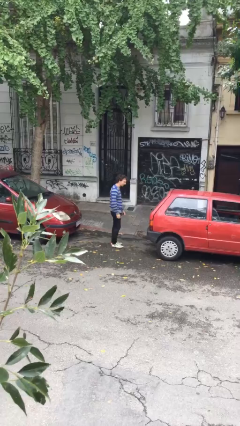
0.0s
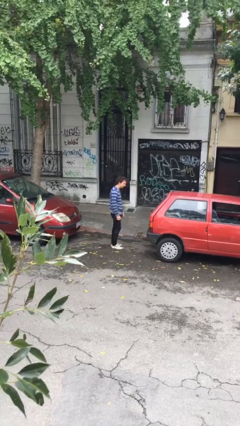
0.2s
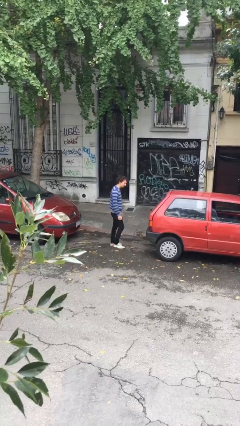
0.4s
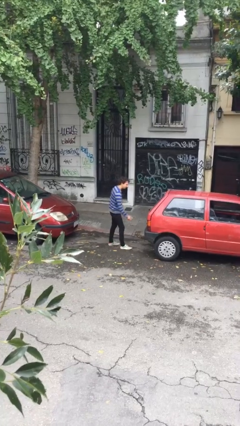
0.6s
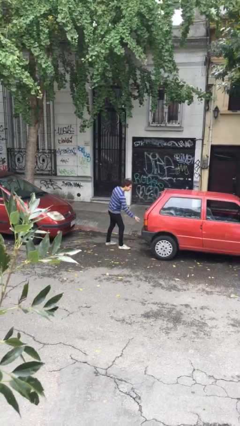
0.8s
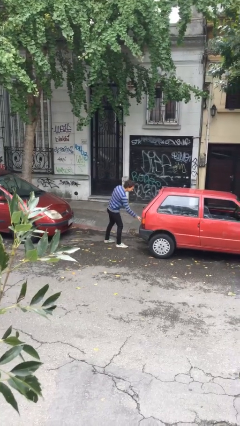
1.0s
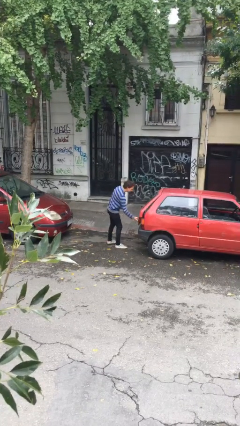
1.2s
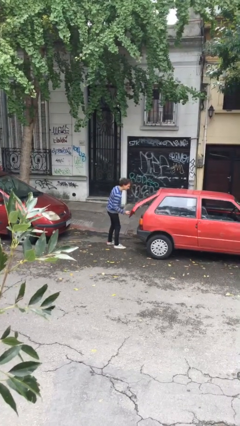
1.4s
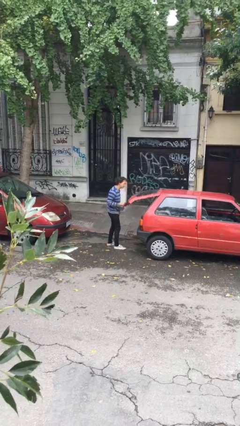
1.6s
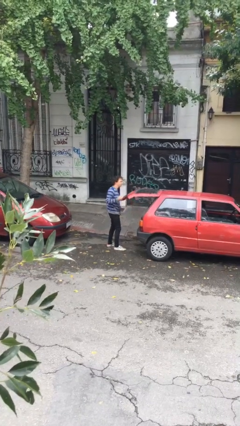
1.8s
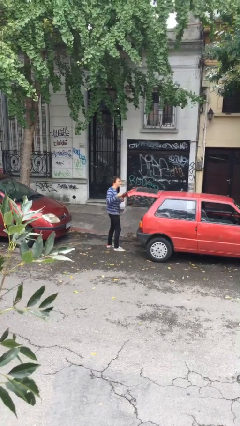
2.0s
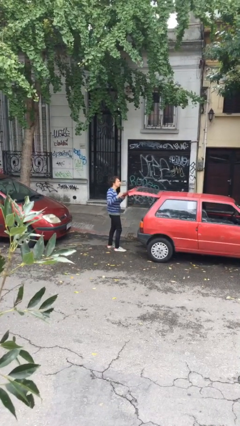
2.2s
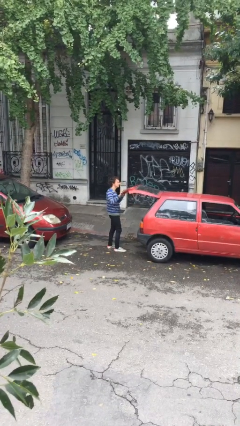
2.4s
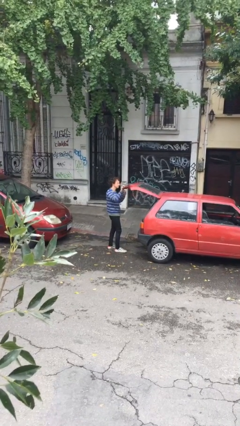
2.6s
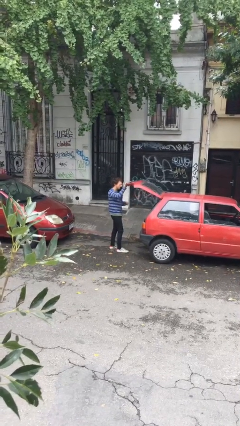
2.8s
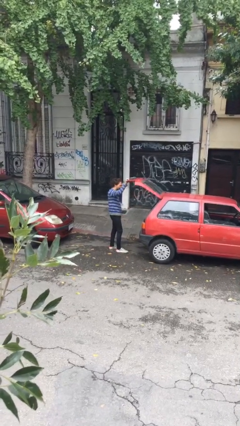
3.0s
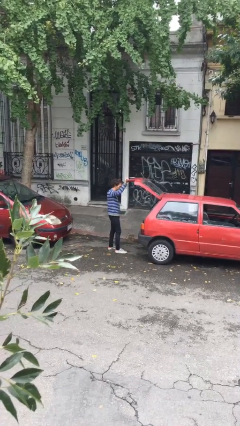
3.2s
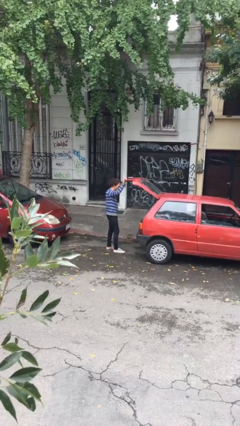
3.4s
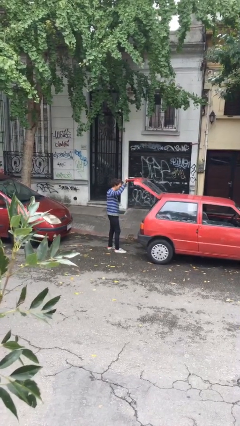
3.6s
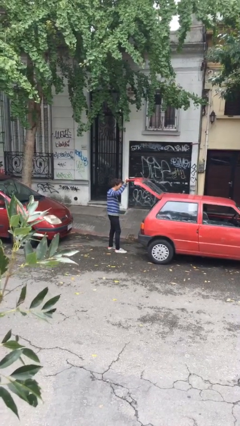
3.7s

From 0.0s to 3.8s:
person opens car trunk

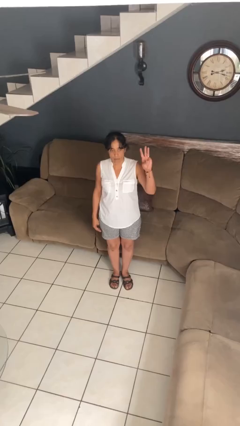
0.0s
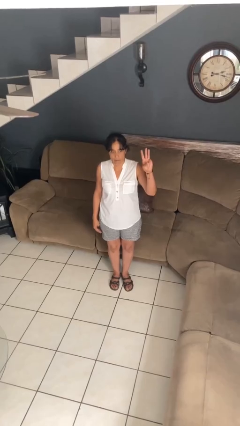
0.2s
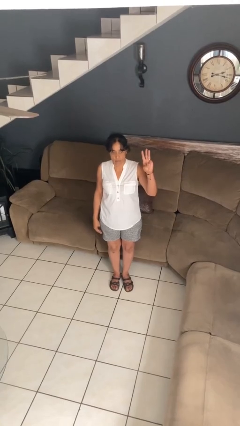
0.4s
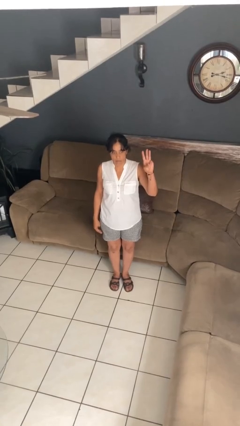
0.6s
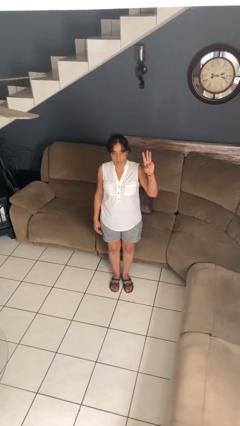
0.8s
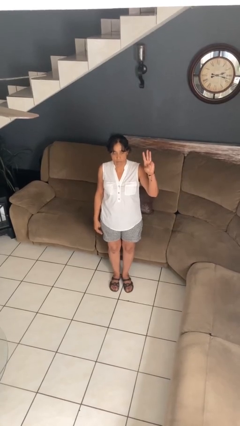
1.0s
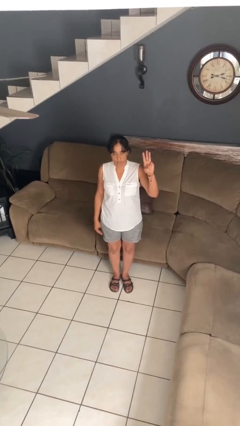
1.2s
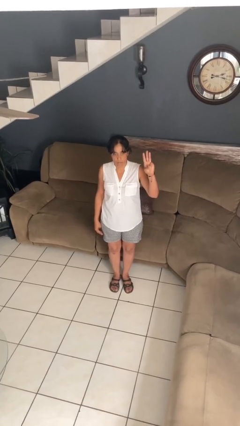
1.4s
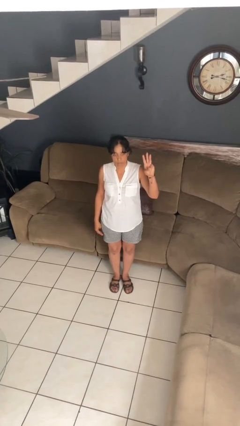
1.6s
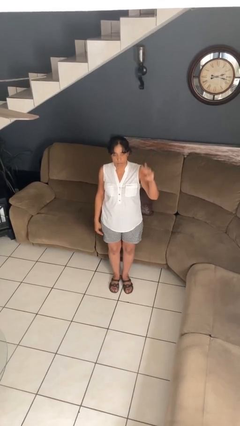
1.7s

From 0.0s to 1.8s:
person gestures number three

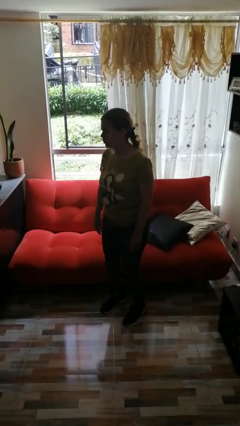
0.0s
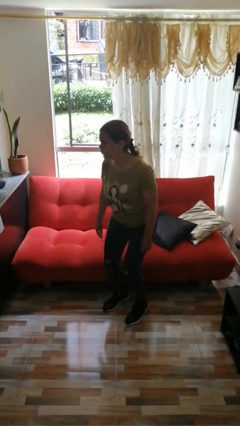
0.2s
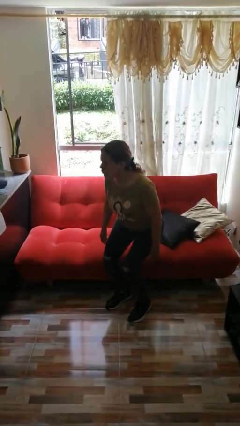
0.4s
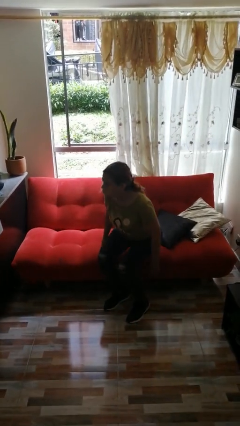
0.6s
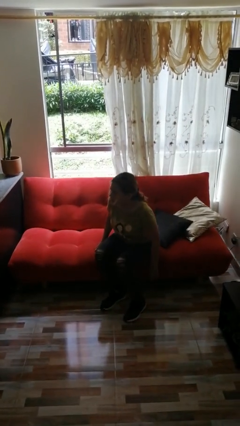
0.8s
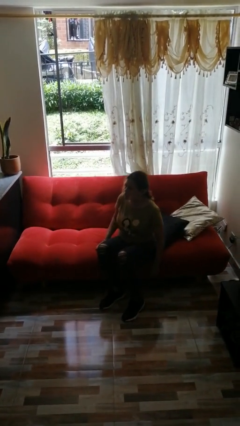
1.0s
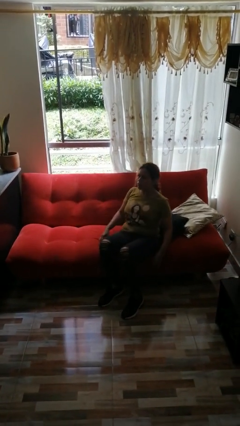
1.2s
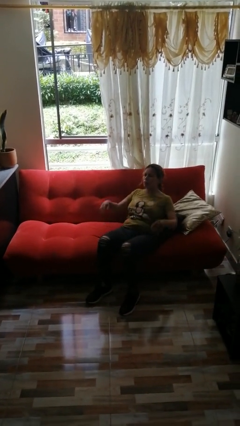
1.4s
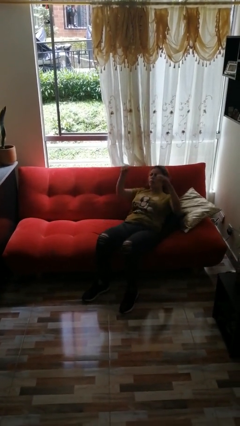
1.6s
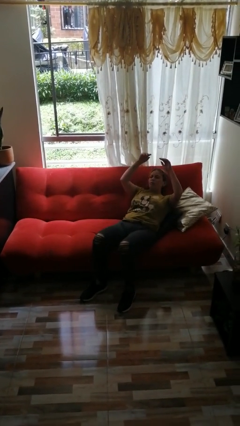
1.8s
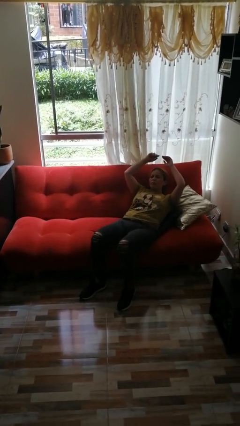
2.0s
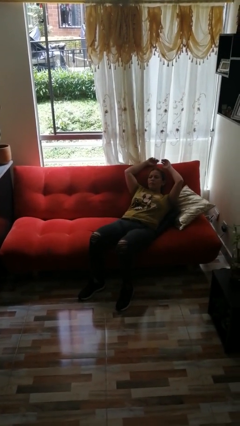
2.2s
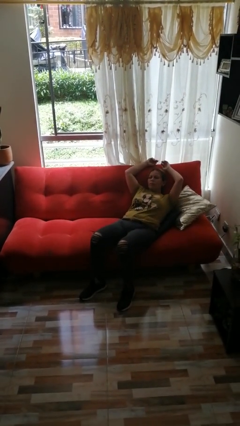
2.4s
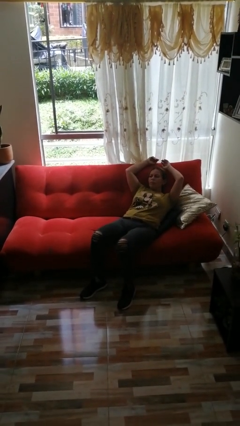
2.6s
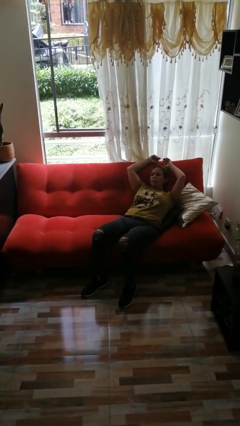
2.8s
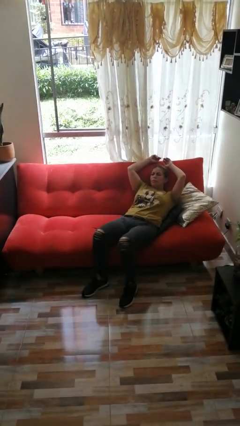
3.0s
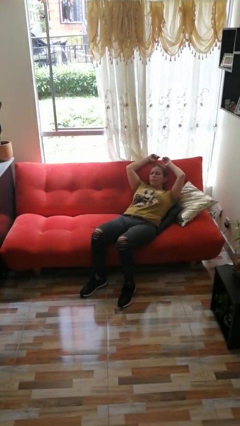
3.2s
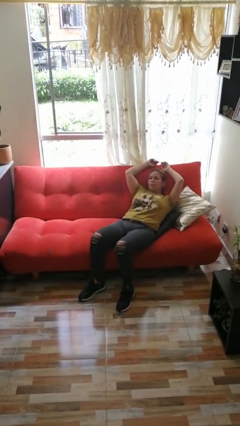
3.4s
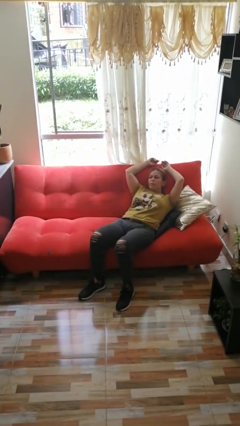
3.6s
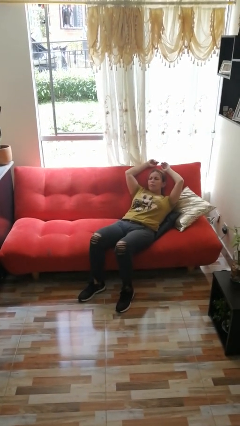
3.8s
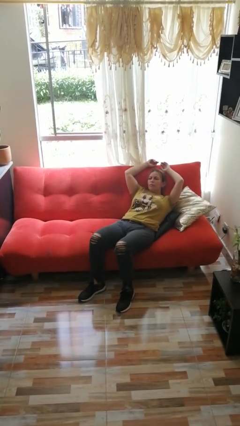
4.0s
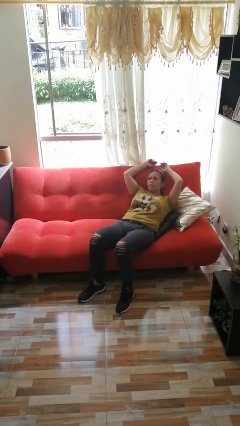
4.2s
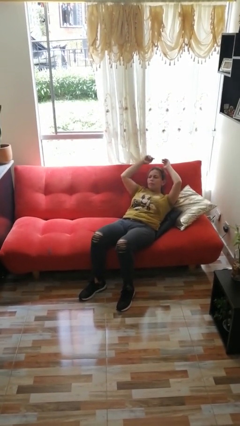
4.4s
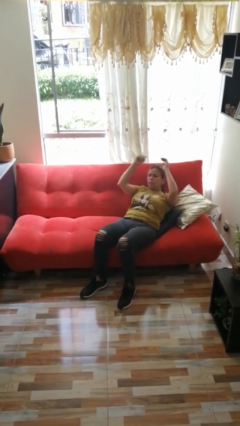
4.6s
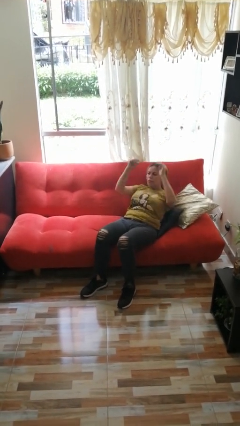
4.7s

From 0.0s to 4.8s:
person lies down on couch

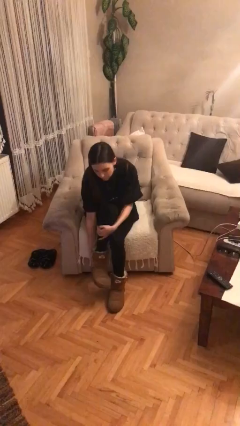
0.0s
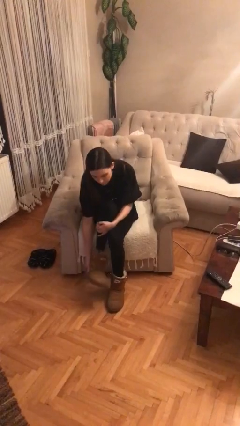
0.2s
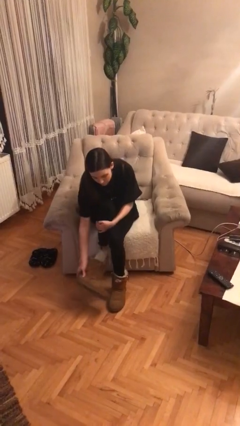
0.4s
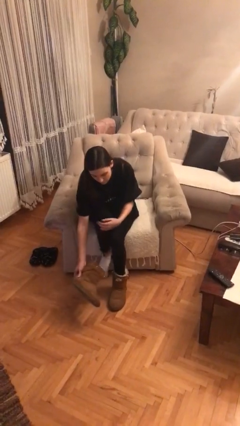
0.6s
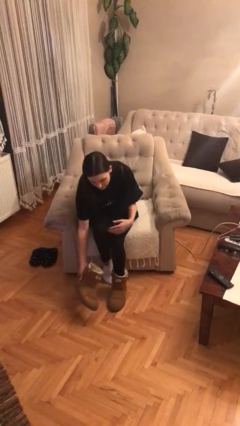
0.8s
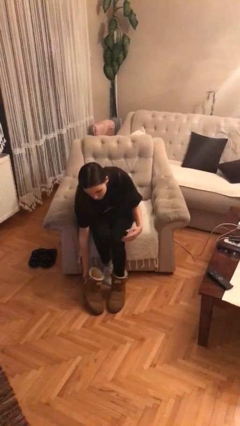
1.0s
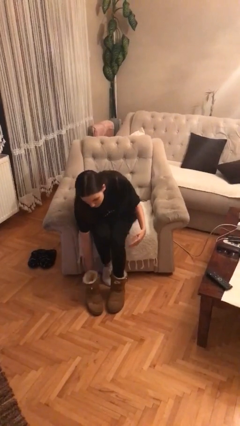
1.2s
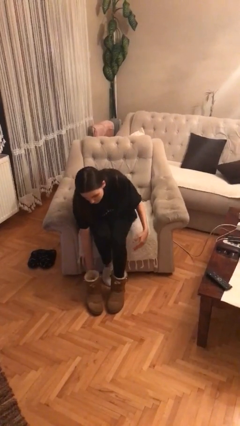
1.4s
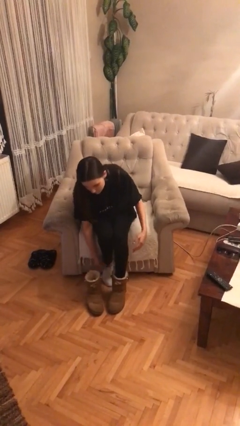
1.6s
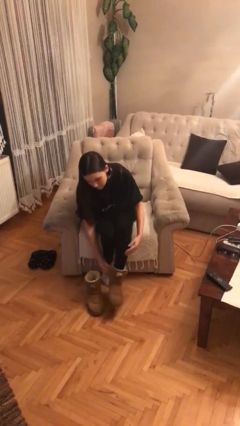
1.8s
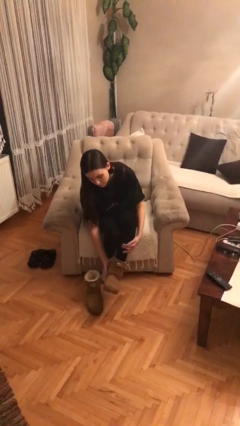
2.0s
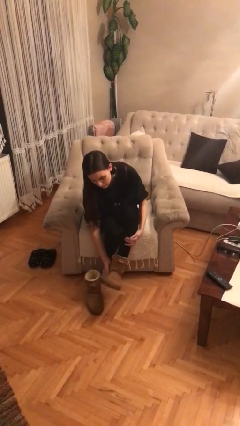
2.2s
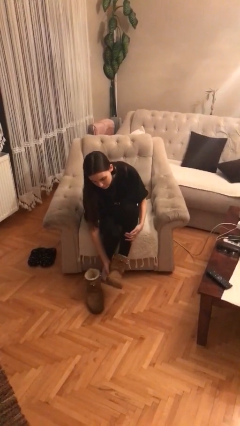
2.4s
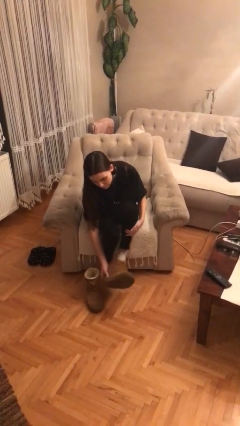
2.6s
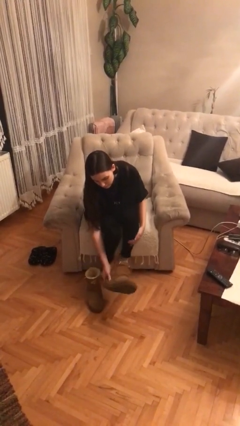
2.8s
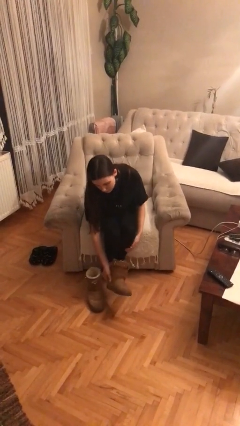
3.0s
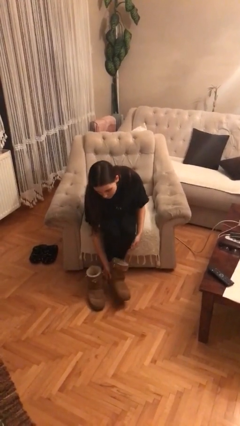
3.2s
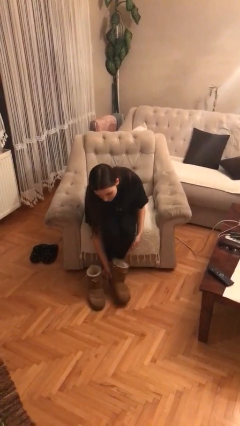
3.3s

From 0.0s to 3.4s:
person takes off shoes

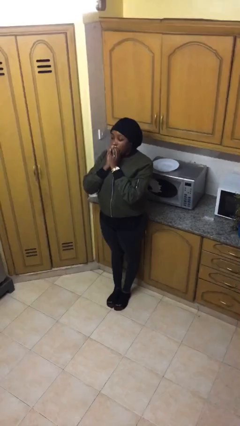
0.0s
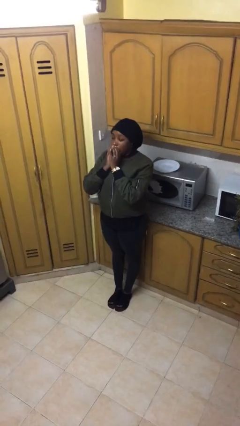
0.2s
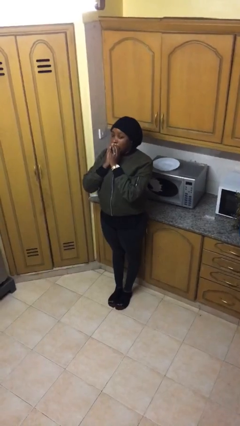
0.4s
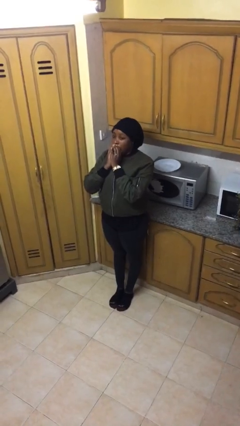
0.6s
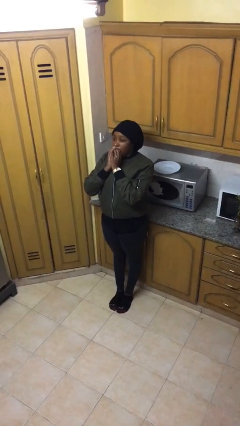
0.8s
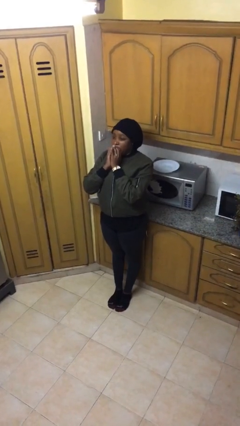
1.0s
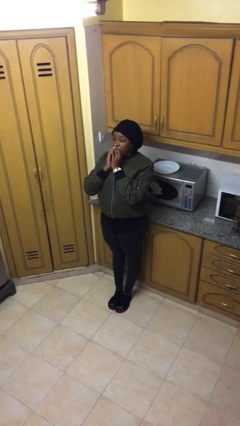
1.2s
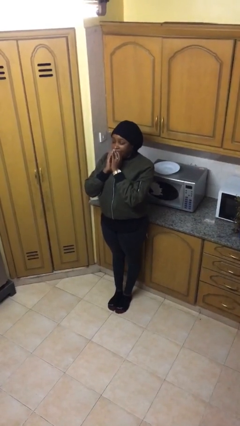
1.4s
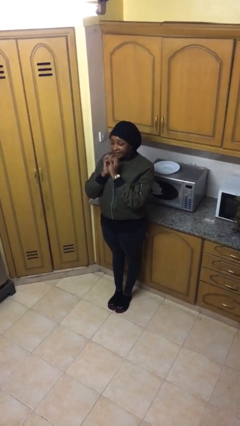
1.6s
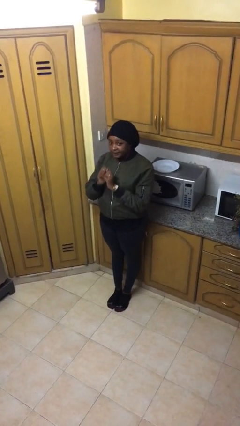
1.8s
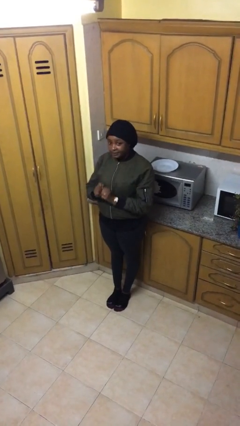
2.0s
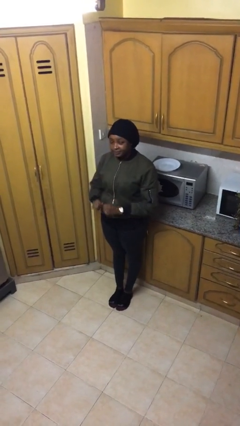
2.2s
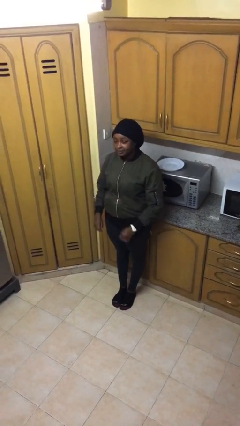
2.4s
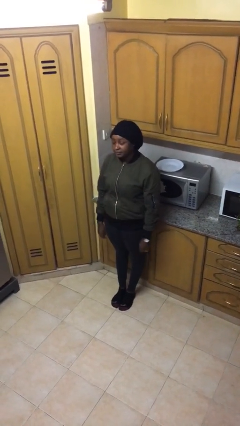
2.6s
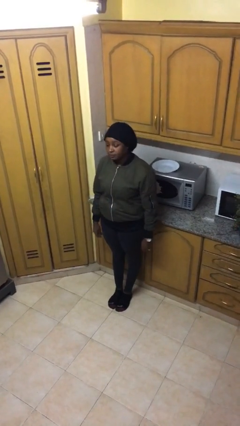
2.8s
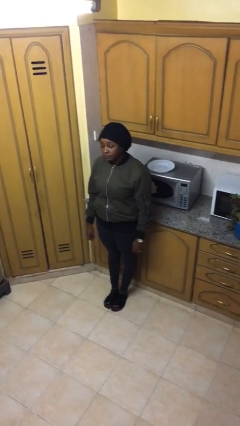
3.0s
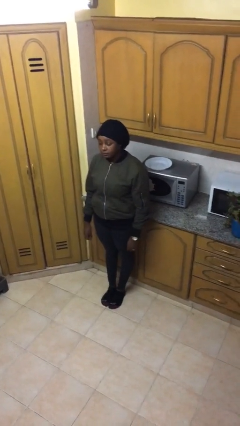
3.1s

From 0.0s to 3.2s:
person yawns

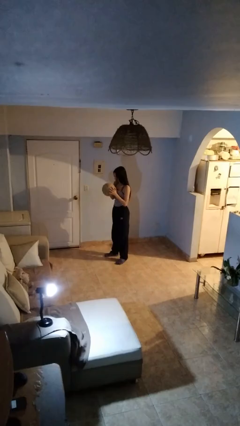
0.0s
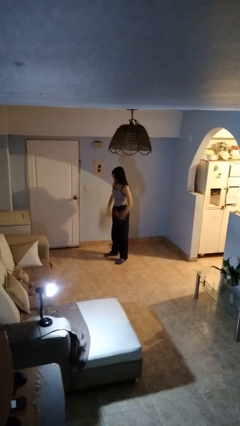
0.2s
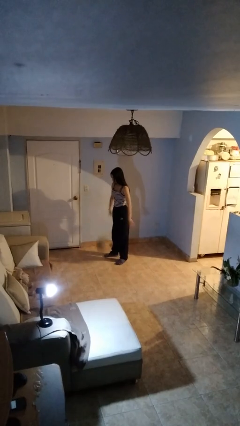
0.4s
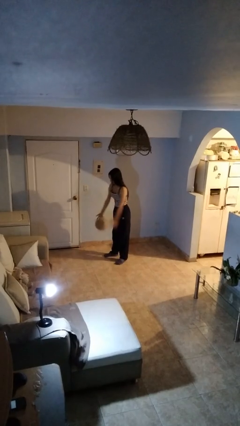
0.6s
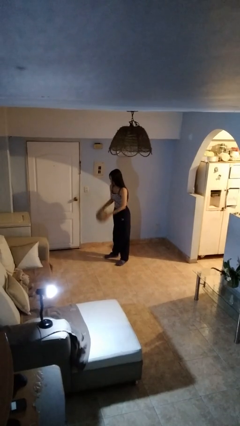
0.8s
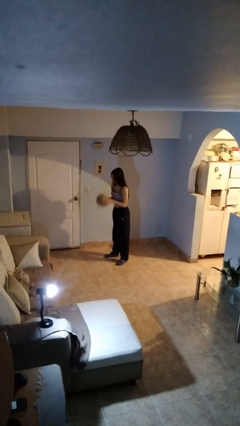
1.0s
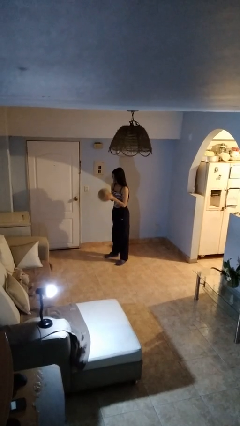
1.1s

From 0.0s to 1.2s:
person bounces ball on floor
